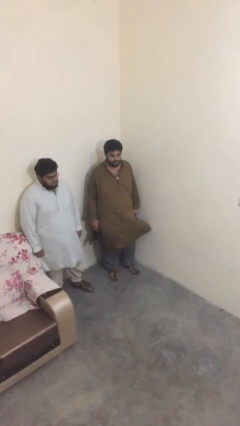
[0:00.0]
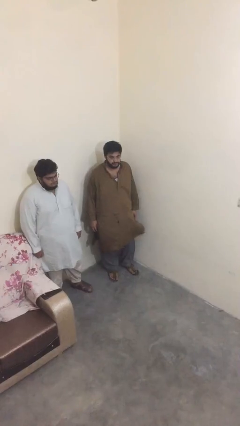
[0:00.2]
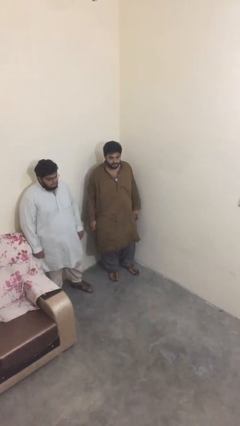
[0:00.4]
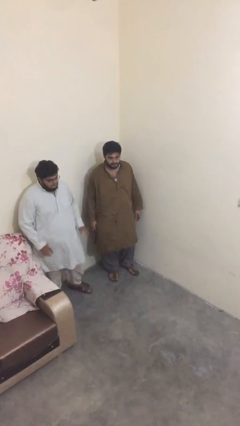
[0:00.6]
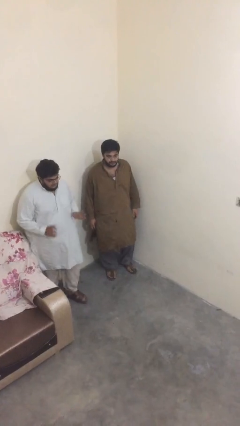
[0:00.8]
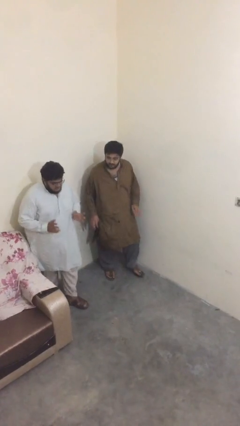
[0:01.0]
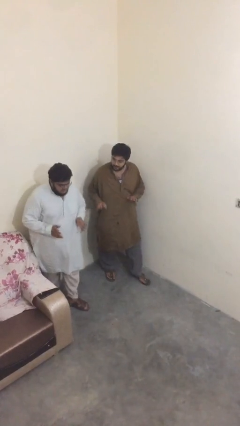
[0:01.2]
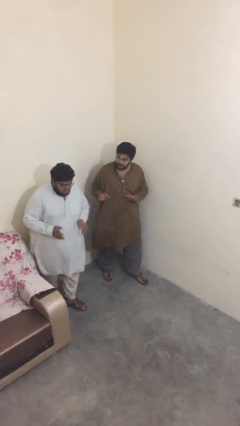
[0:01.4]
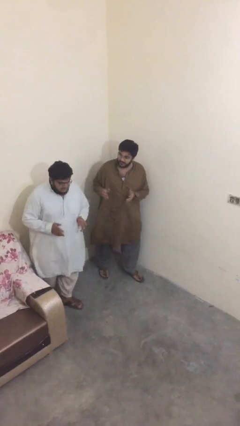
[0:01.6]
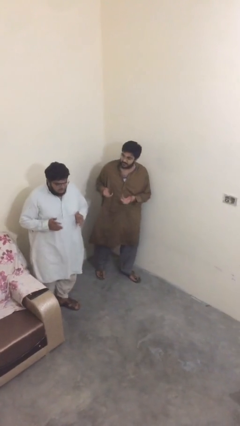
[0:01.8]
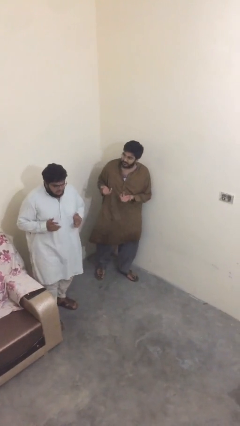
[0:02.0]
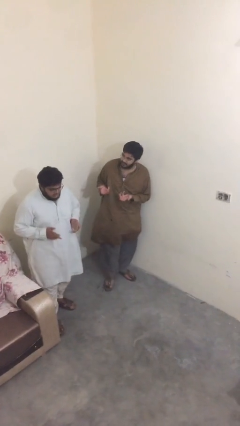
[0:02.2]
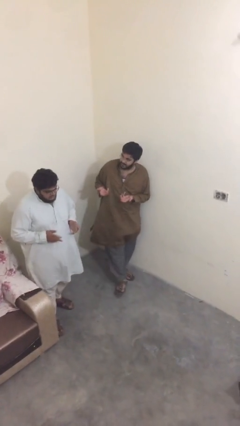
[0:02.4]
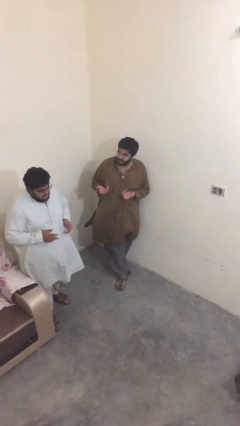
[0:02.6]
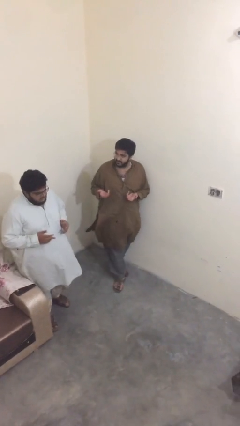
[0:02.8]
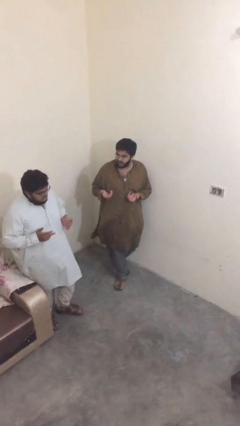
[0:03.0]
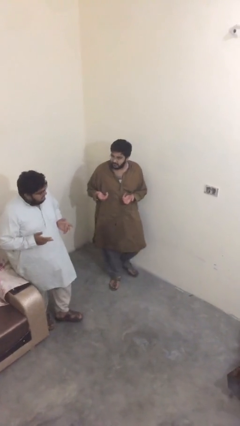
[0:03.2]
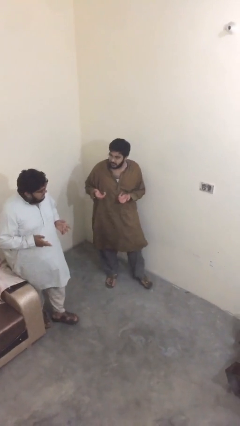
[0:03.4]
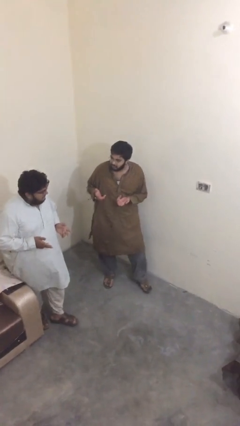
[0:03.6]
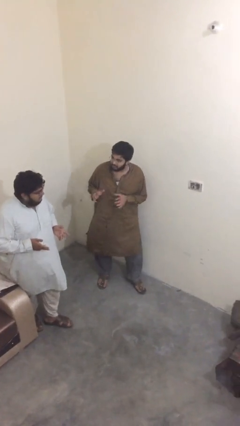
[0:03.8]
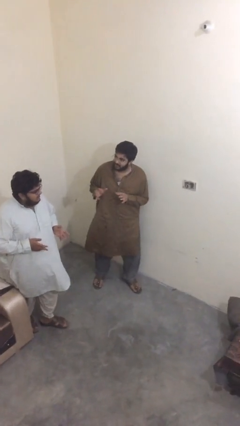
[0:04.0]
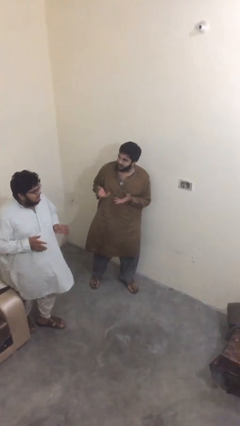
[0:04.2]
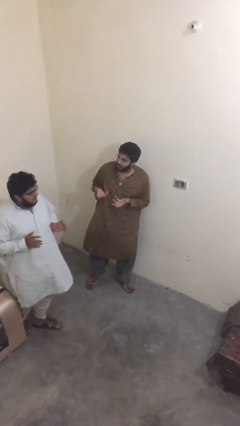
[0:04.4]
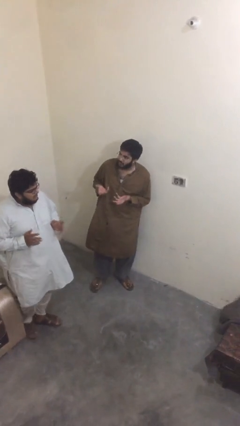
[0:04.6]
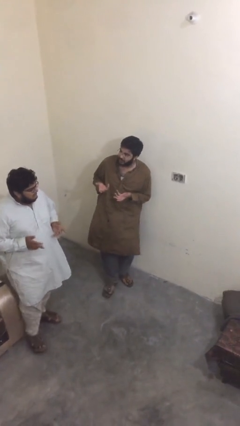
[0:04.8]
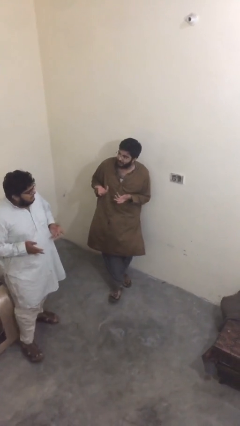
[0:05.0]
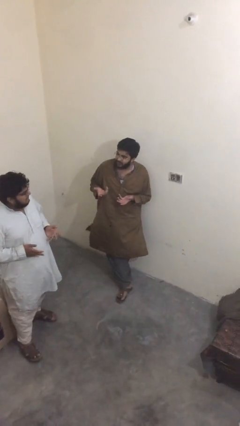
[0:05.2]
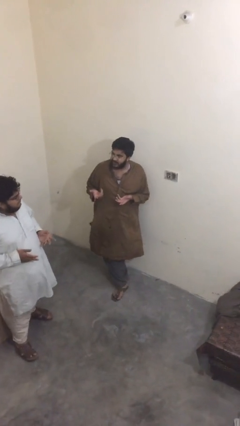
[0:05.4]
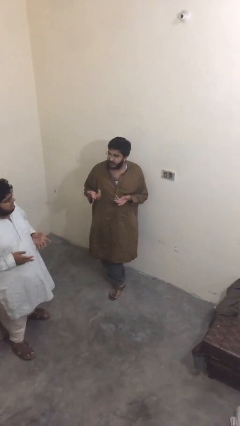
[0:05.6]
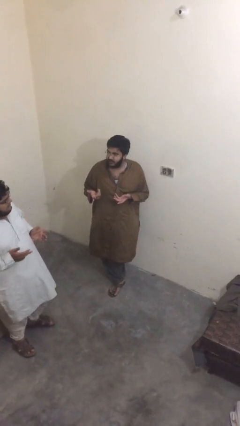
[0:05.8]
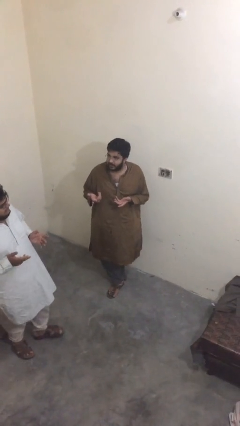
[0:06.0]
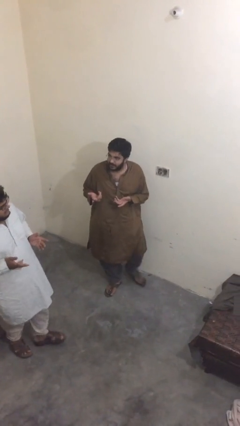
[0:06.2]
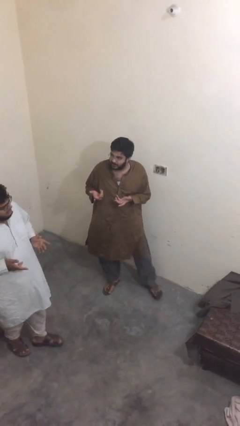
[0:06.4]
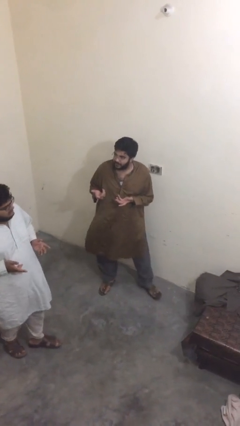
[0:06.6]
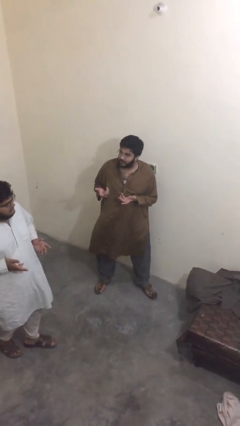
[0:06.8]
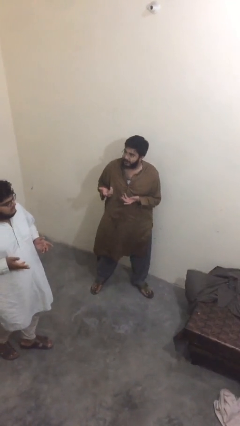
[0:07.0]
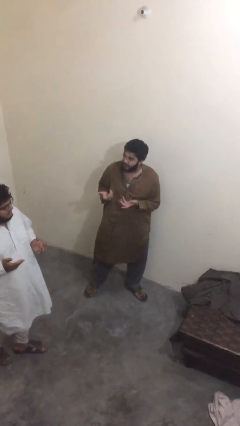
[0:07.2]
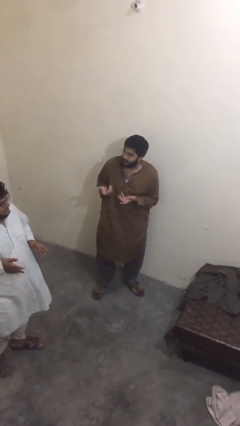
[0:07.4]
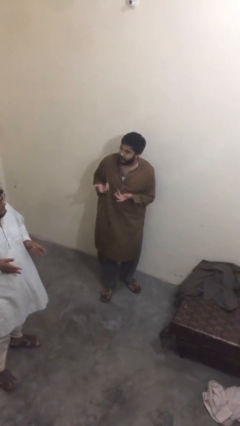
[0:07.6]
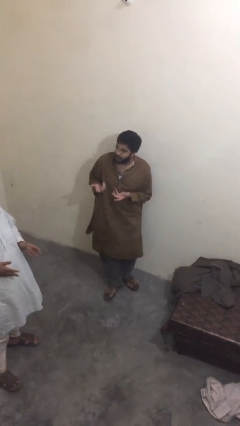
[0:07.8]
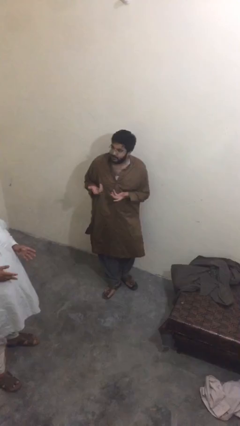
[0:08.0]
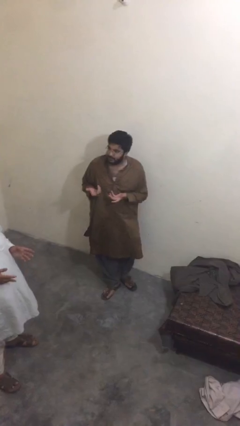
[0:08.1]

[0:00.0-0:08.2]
person talks to person

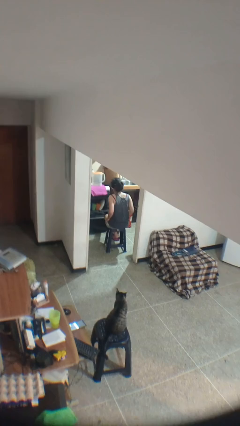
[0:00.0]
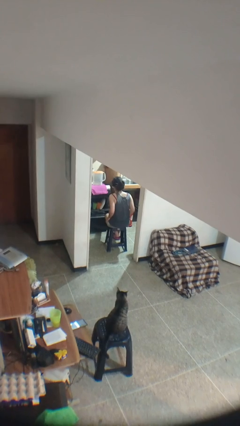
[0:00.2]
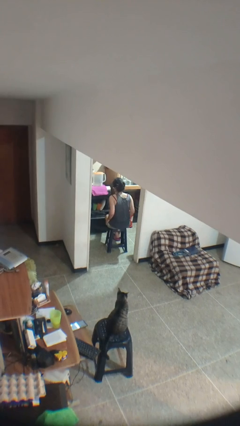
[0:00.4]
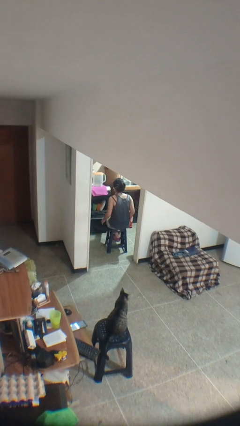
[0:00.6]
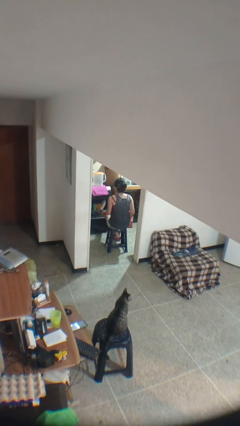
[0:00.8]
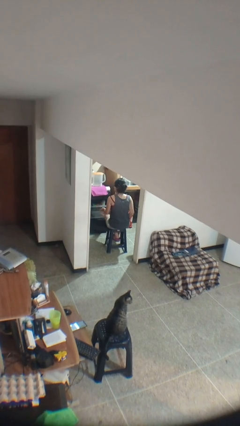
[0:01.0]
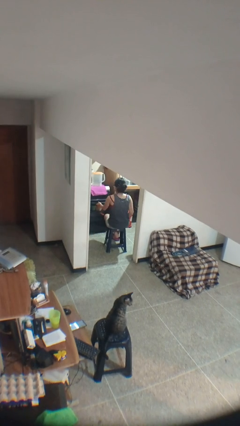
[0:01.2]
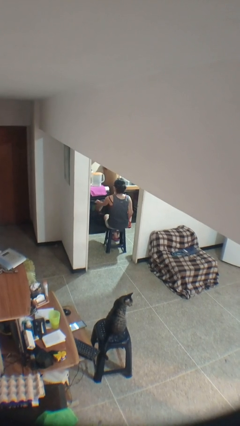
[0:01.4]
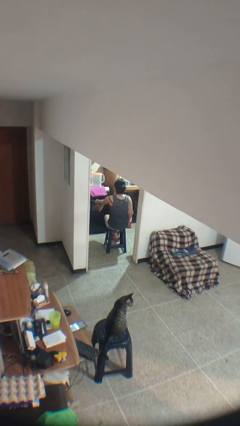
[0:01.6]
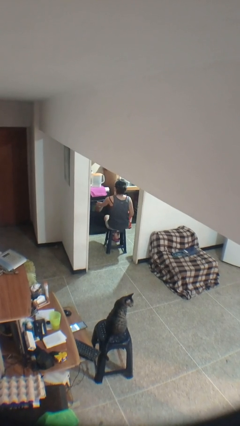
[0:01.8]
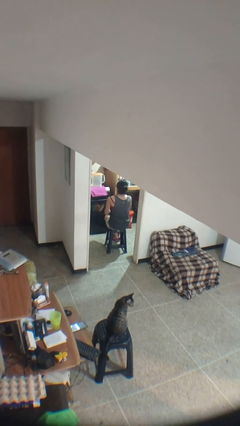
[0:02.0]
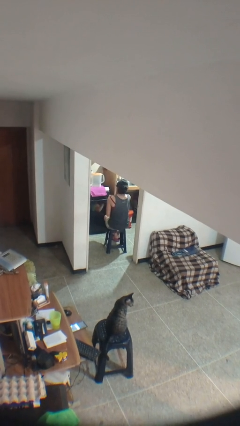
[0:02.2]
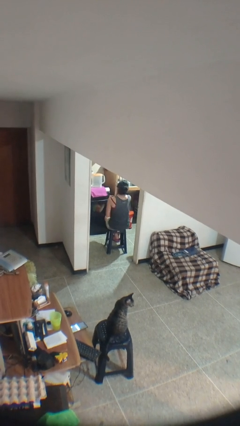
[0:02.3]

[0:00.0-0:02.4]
person closes dishwasher

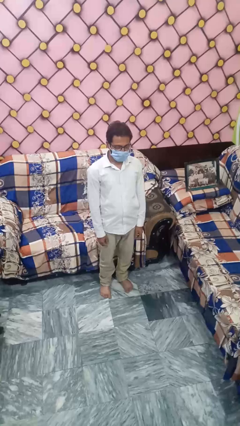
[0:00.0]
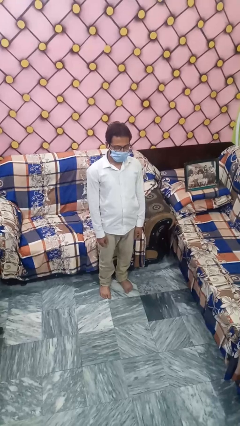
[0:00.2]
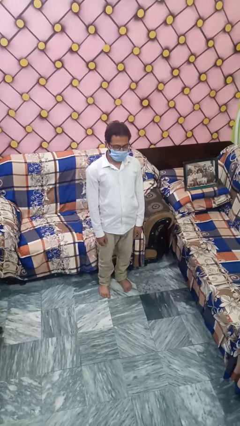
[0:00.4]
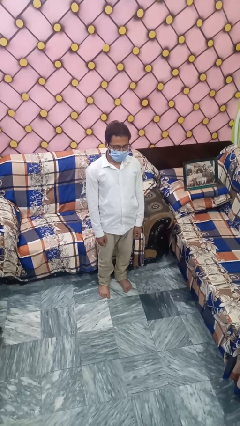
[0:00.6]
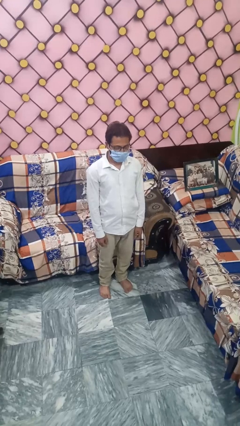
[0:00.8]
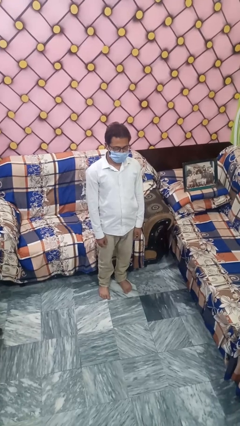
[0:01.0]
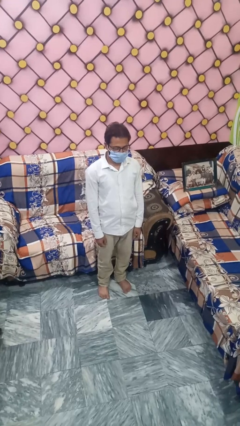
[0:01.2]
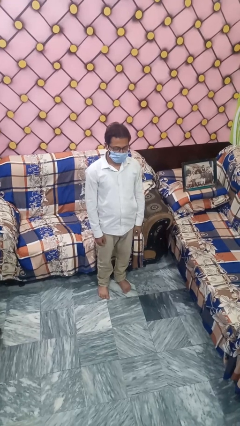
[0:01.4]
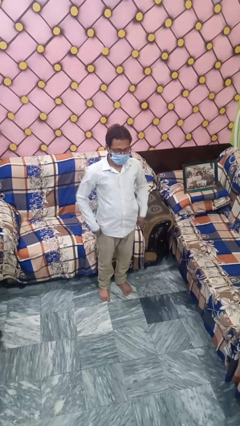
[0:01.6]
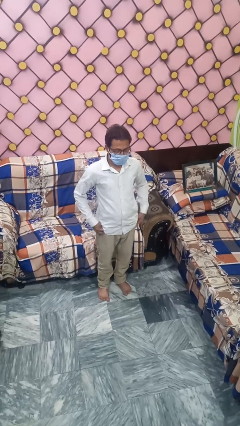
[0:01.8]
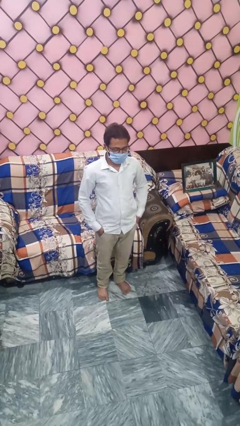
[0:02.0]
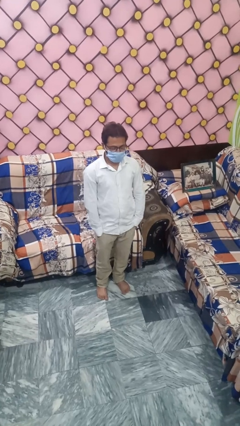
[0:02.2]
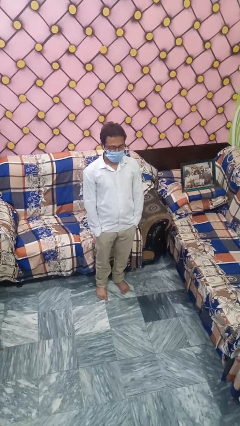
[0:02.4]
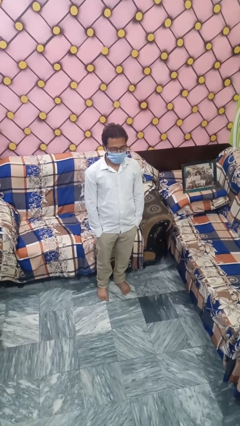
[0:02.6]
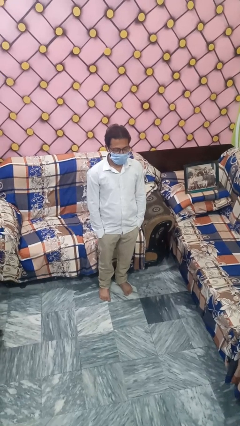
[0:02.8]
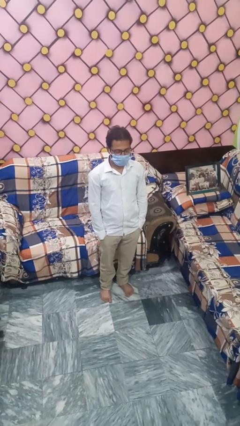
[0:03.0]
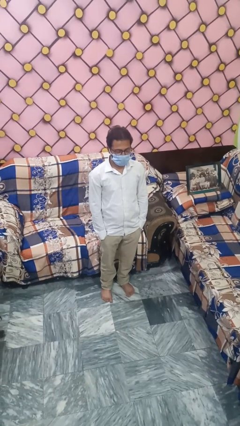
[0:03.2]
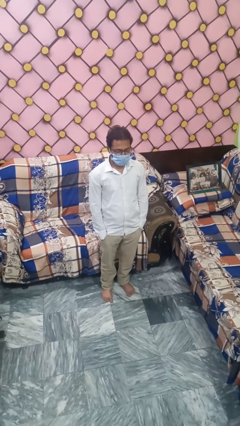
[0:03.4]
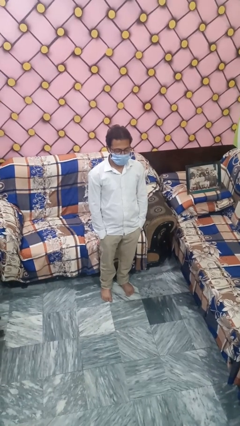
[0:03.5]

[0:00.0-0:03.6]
person puts hands in back pockets

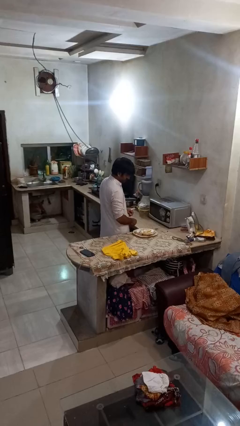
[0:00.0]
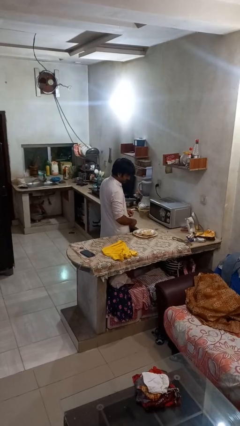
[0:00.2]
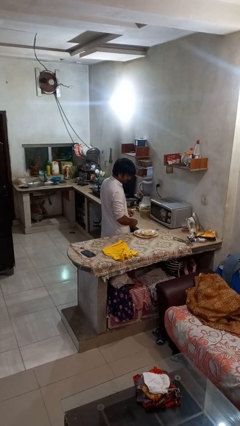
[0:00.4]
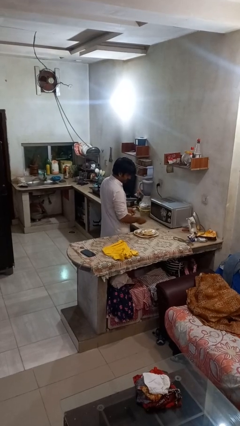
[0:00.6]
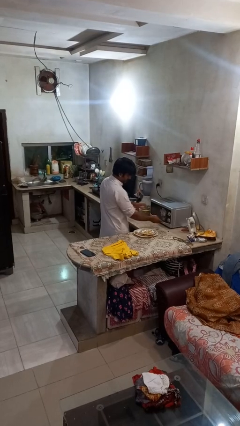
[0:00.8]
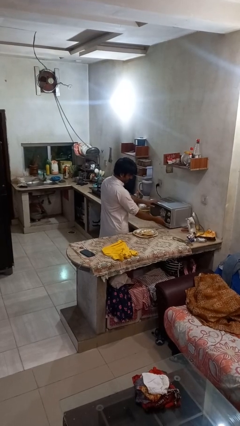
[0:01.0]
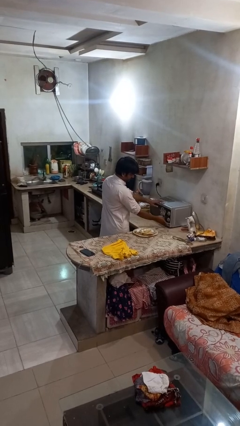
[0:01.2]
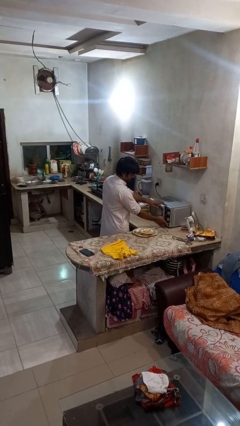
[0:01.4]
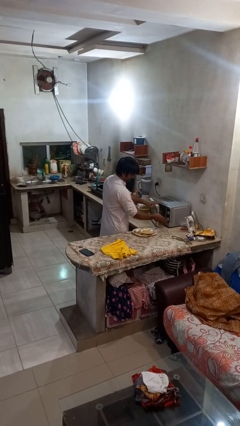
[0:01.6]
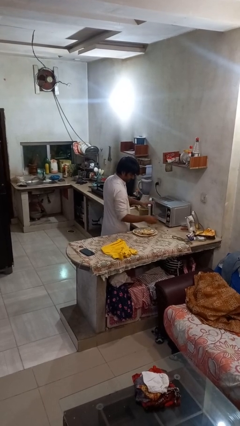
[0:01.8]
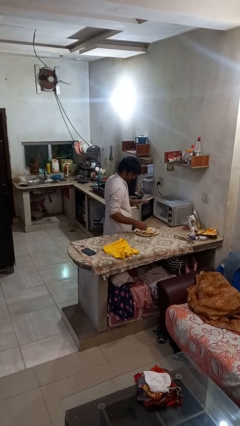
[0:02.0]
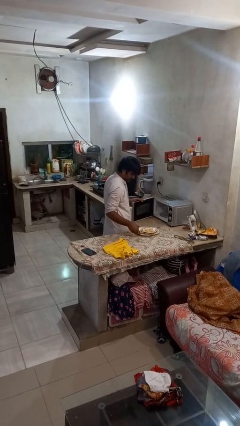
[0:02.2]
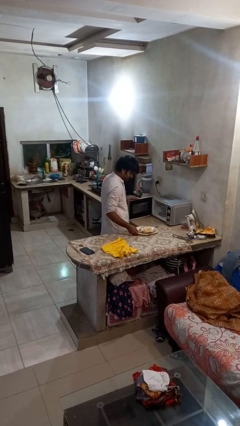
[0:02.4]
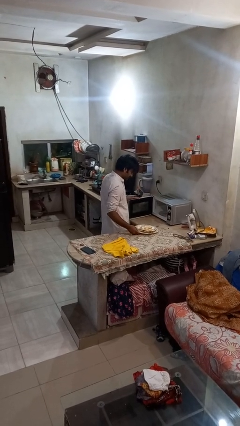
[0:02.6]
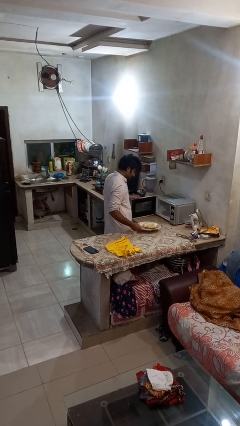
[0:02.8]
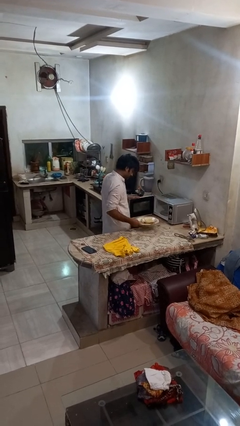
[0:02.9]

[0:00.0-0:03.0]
person opens microwave

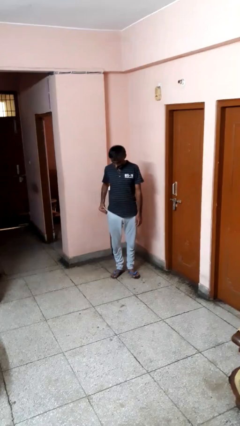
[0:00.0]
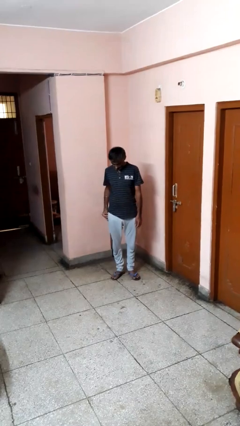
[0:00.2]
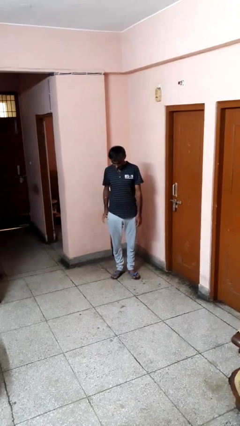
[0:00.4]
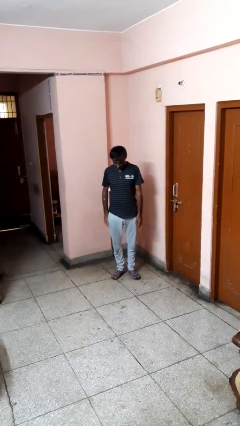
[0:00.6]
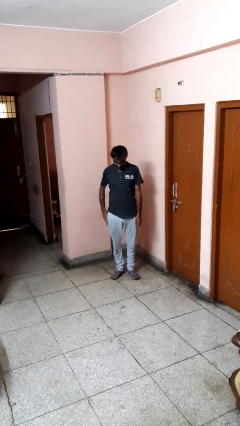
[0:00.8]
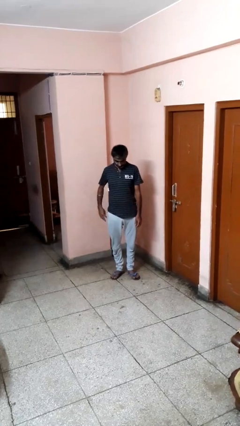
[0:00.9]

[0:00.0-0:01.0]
person puts phone into pocket
